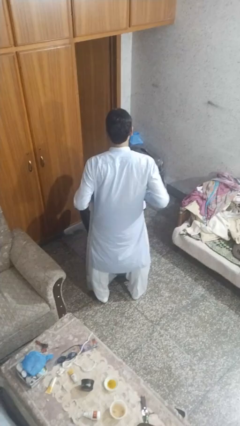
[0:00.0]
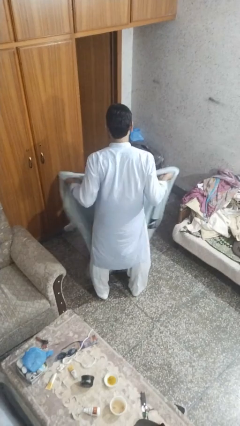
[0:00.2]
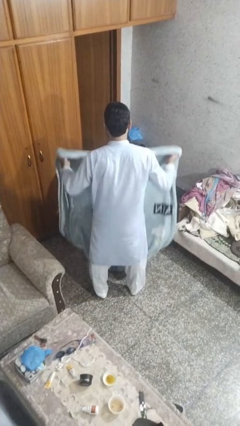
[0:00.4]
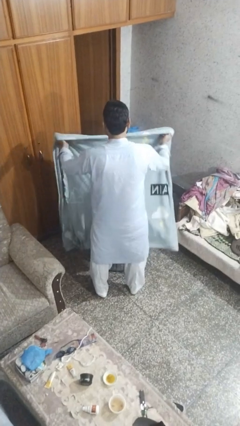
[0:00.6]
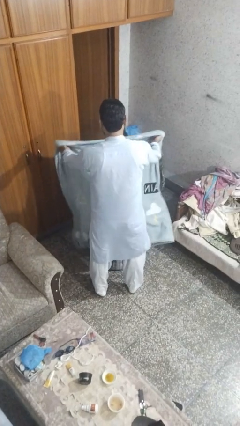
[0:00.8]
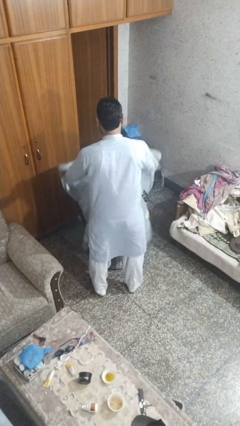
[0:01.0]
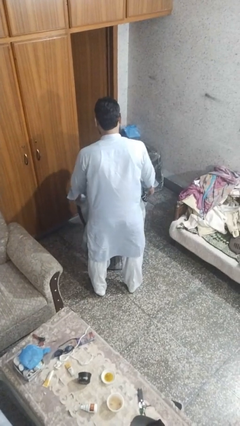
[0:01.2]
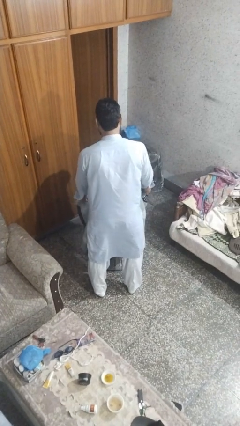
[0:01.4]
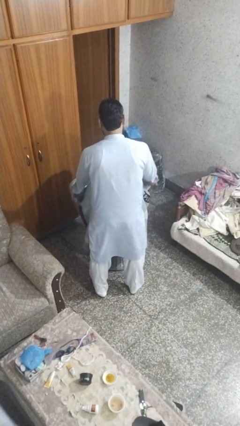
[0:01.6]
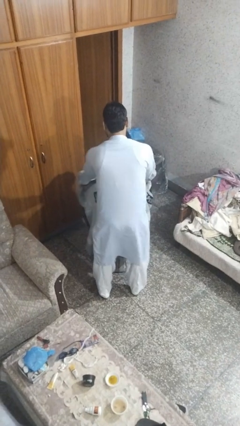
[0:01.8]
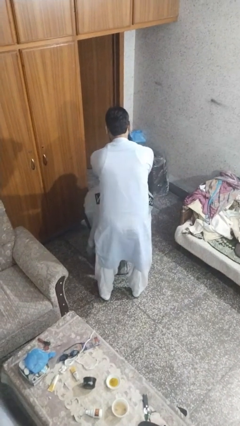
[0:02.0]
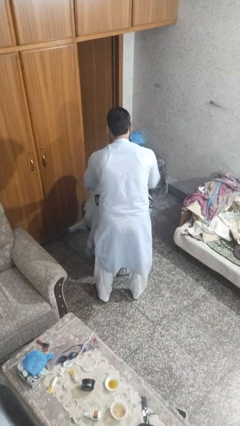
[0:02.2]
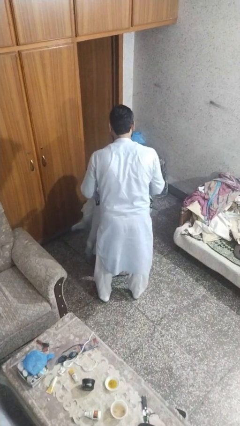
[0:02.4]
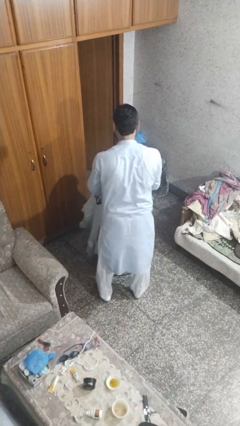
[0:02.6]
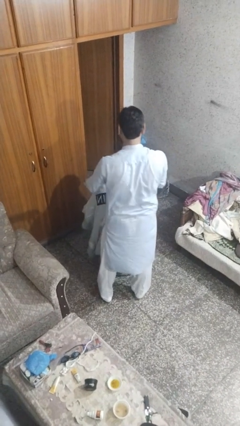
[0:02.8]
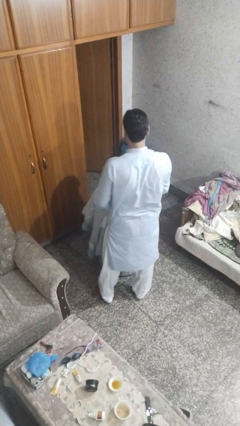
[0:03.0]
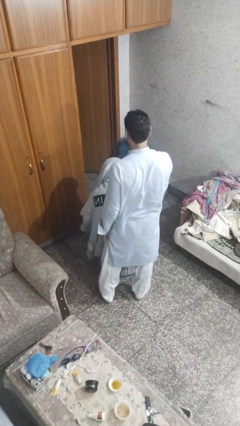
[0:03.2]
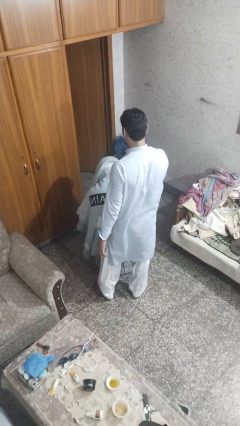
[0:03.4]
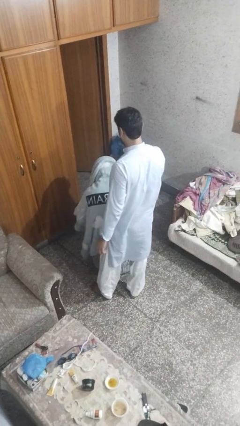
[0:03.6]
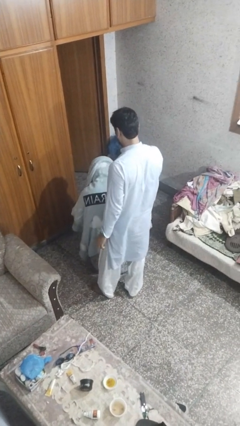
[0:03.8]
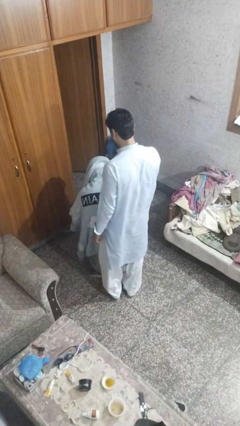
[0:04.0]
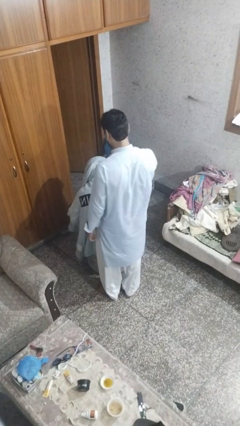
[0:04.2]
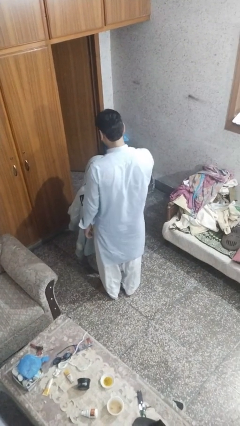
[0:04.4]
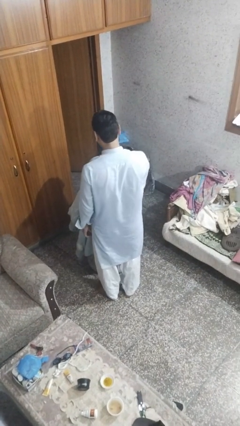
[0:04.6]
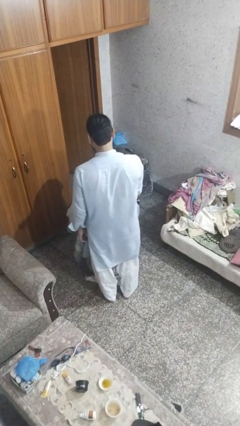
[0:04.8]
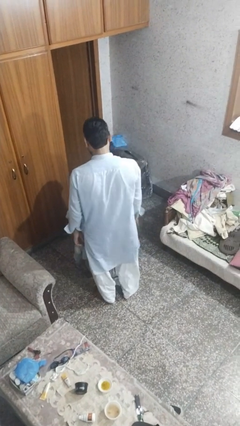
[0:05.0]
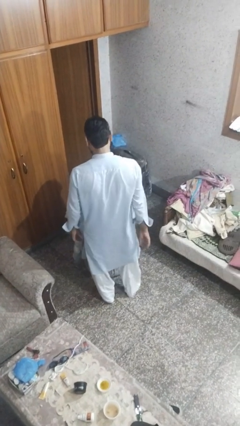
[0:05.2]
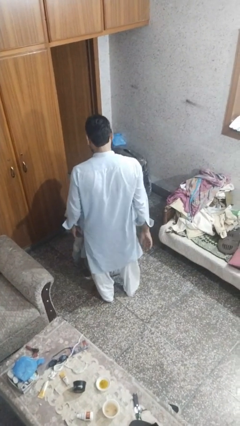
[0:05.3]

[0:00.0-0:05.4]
person covers friend with blanket

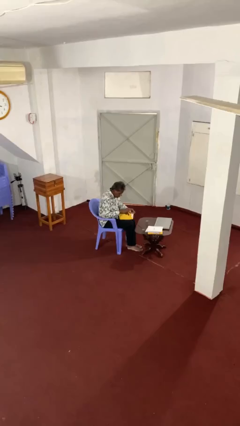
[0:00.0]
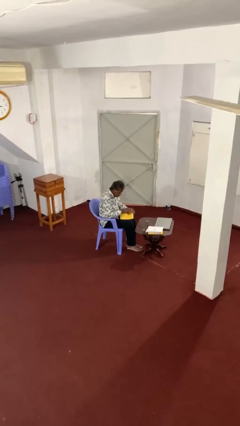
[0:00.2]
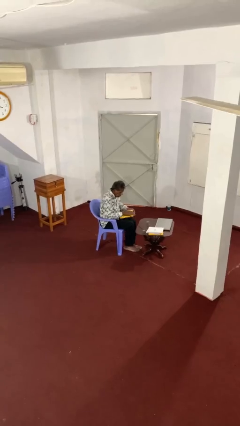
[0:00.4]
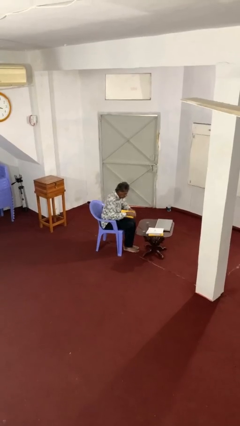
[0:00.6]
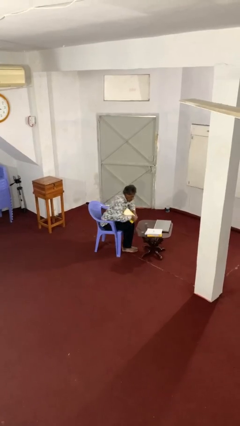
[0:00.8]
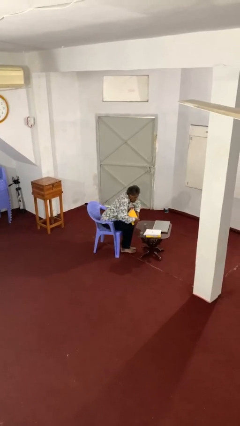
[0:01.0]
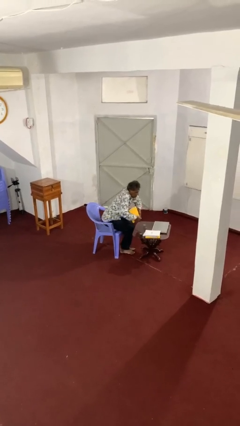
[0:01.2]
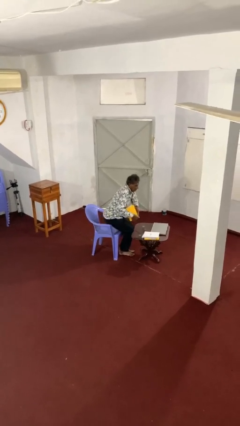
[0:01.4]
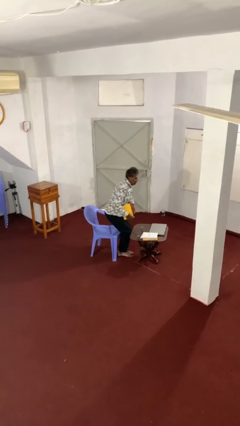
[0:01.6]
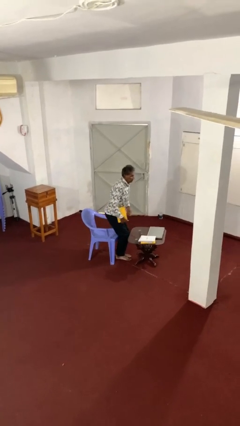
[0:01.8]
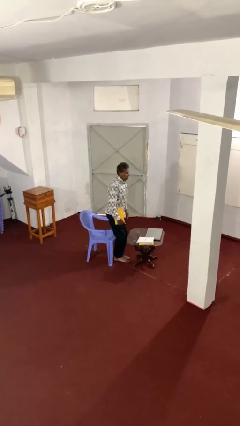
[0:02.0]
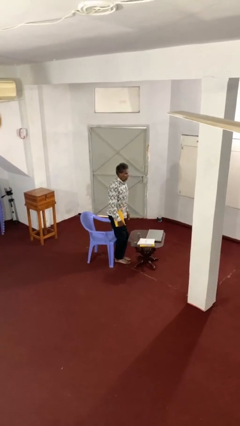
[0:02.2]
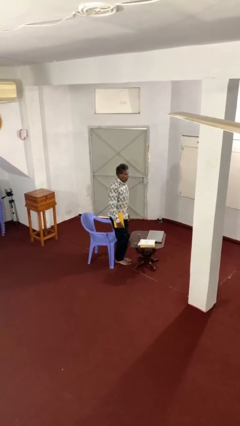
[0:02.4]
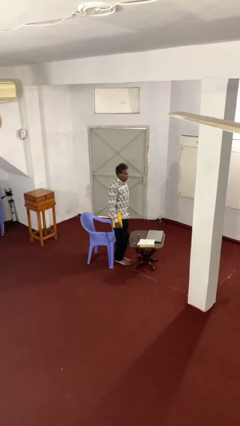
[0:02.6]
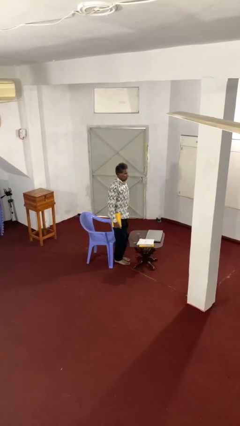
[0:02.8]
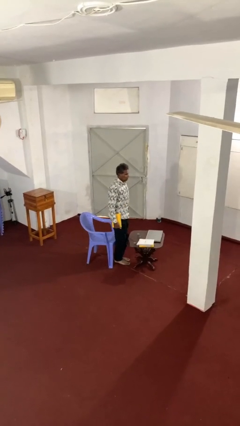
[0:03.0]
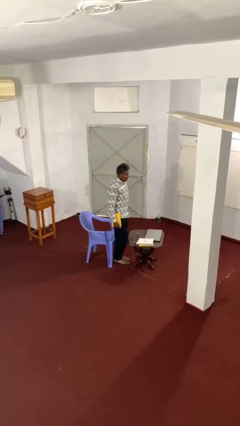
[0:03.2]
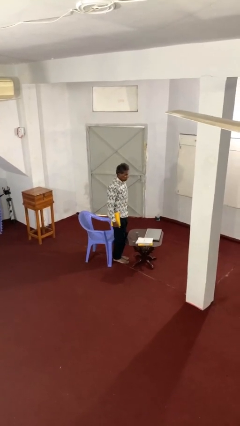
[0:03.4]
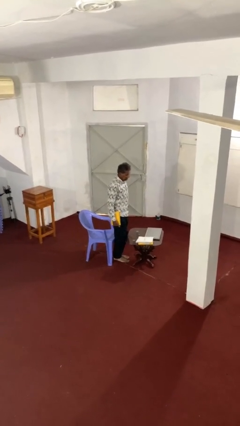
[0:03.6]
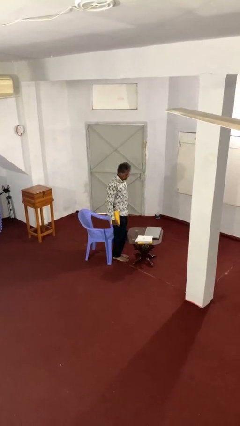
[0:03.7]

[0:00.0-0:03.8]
person stands up

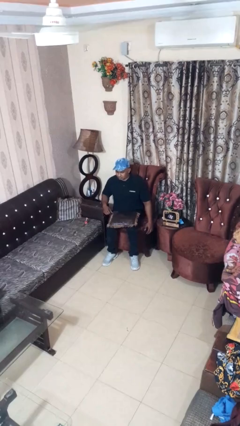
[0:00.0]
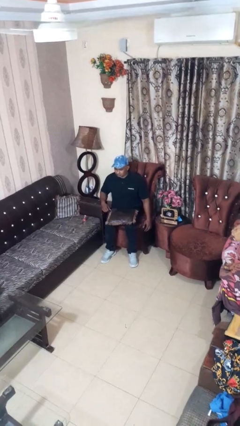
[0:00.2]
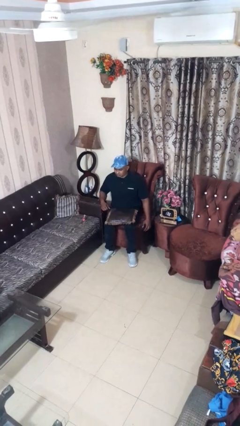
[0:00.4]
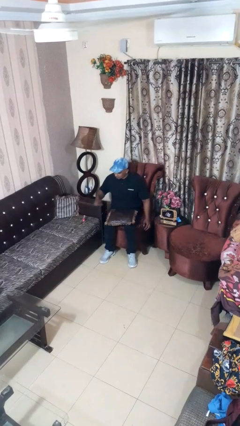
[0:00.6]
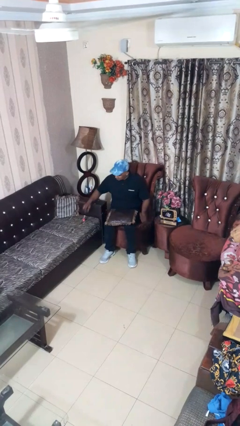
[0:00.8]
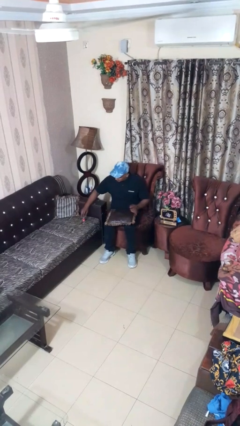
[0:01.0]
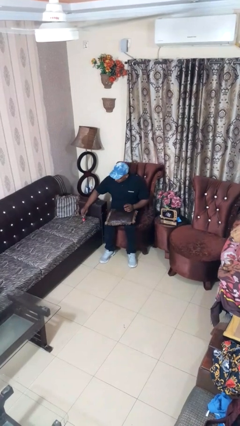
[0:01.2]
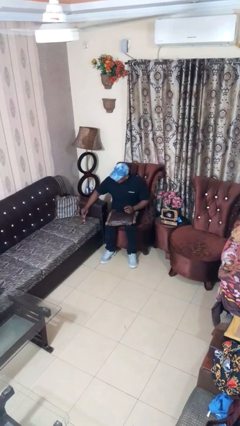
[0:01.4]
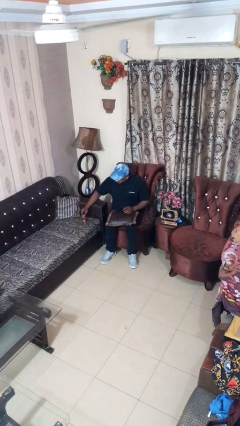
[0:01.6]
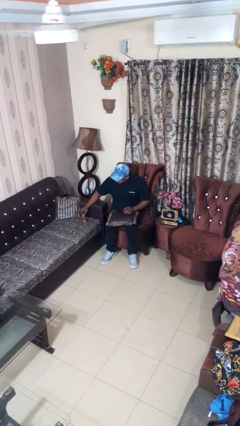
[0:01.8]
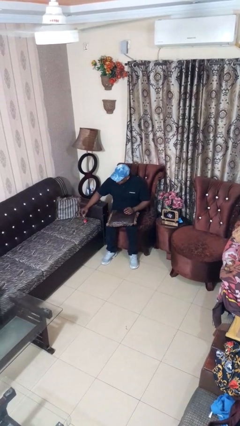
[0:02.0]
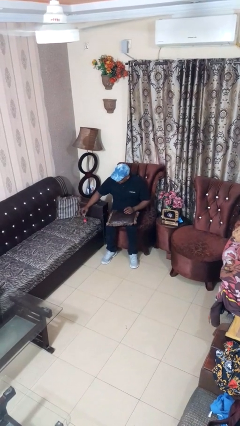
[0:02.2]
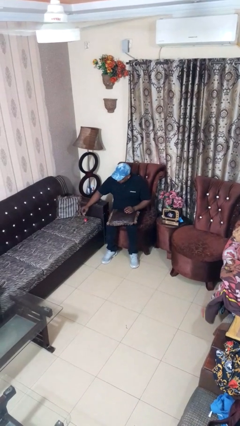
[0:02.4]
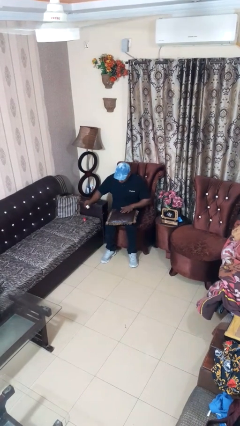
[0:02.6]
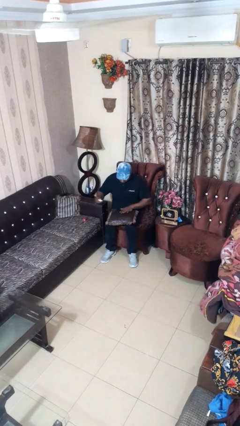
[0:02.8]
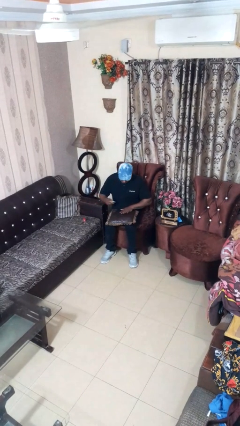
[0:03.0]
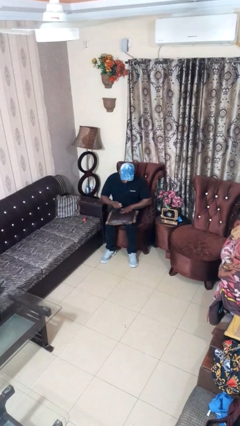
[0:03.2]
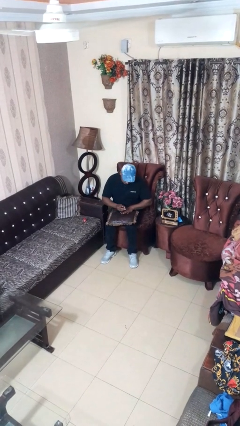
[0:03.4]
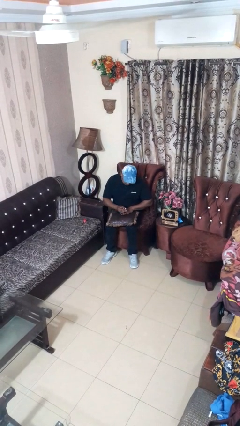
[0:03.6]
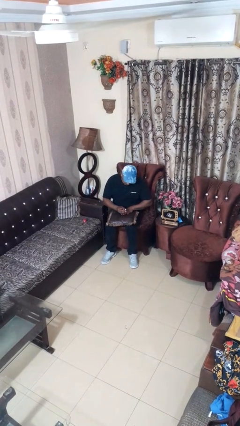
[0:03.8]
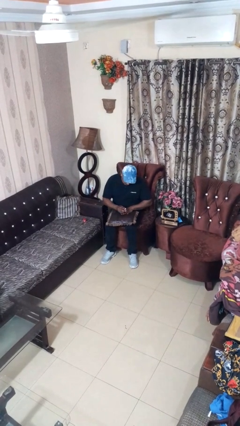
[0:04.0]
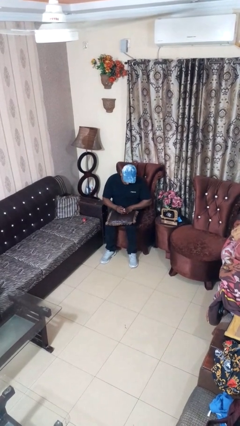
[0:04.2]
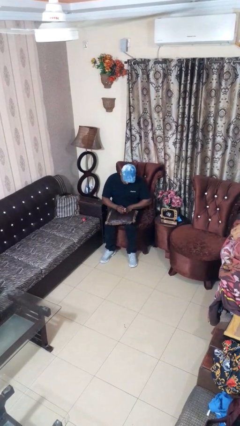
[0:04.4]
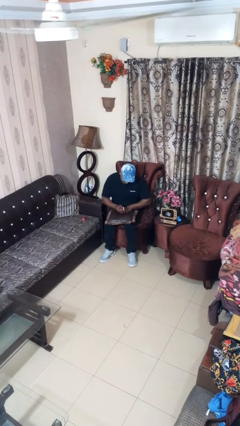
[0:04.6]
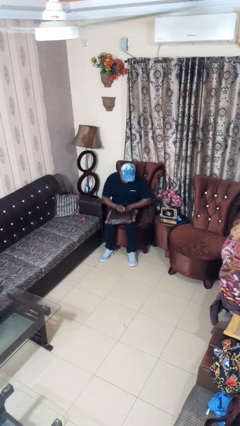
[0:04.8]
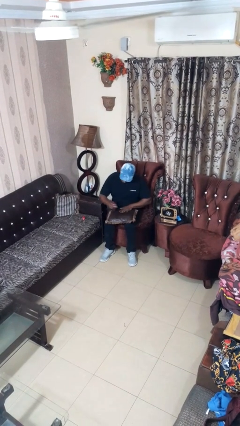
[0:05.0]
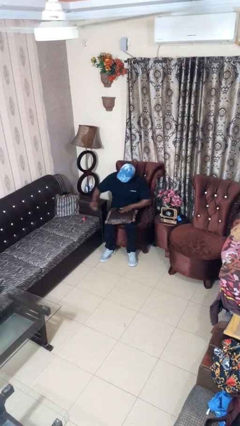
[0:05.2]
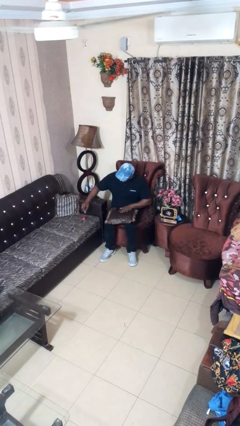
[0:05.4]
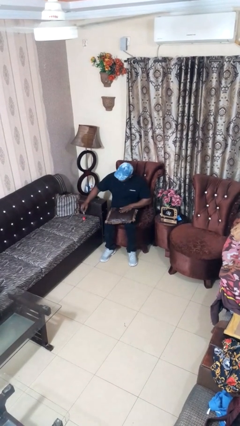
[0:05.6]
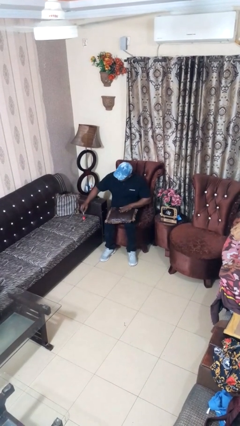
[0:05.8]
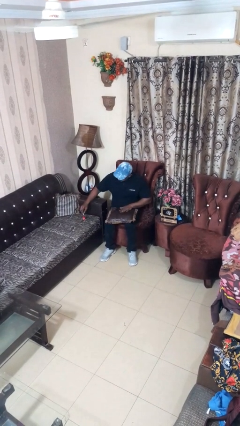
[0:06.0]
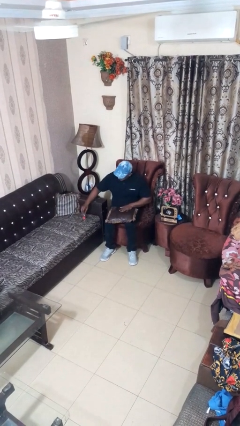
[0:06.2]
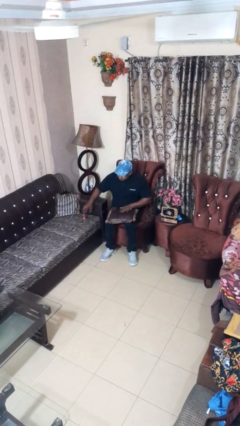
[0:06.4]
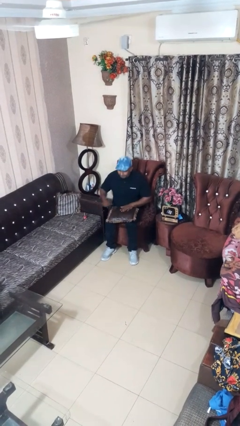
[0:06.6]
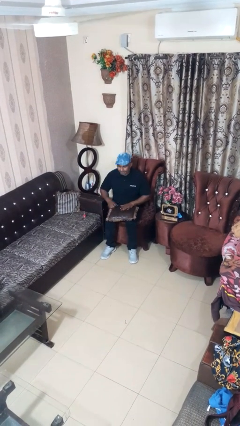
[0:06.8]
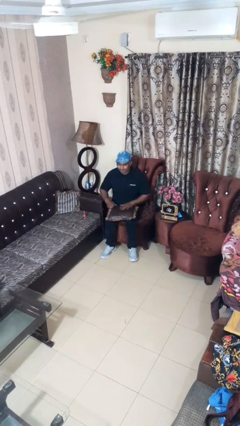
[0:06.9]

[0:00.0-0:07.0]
person paints fingernails

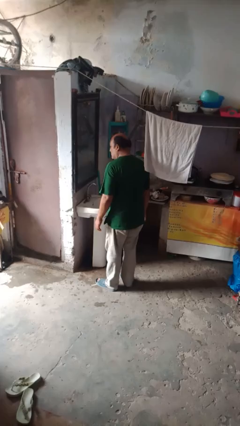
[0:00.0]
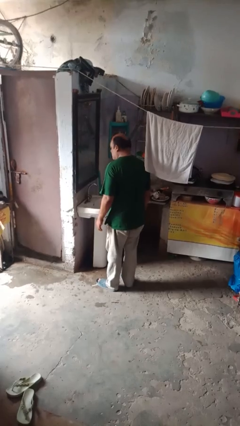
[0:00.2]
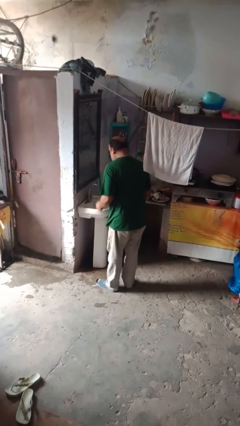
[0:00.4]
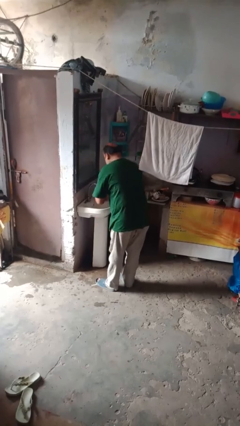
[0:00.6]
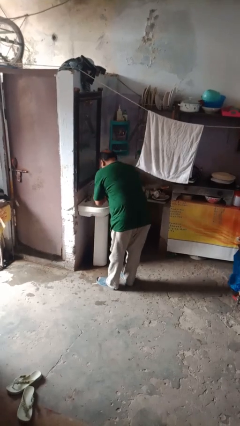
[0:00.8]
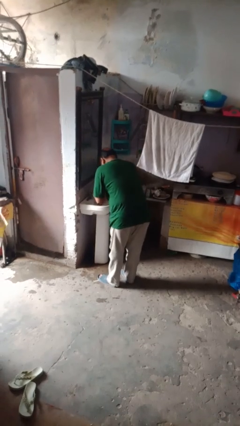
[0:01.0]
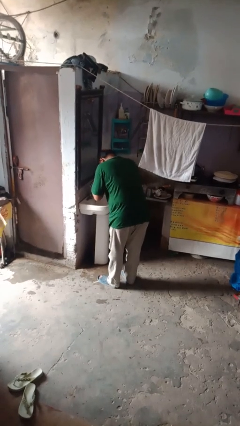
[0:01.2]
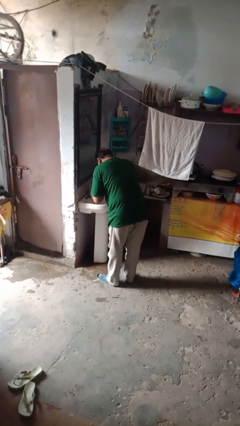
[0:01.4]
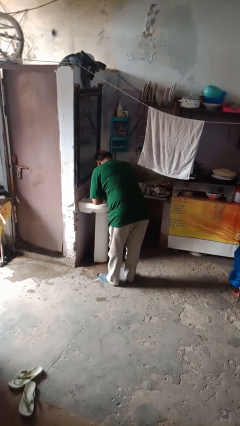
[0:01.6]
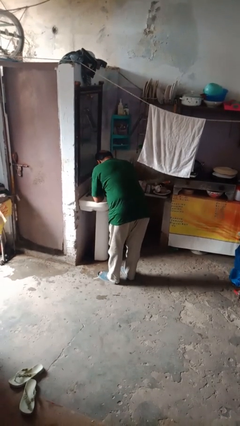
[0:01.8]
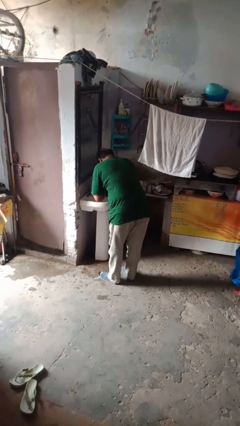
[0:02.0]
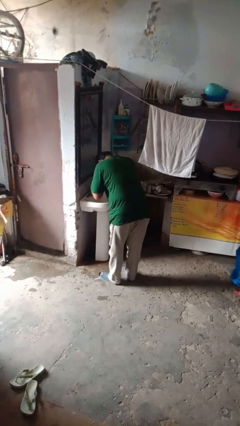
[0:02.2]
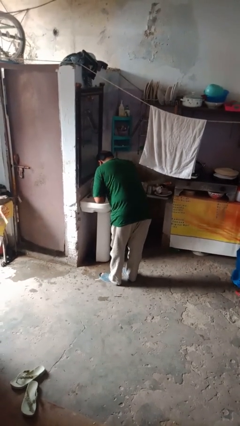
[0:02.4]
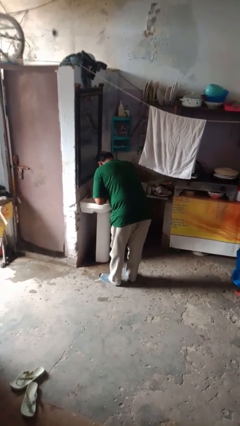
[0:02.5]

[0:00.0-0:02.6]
person washes face
